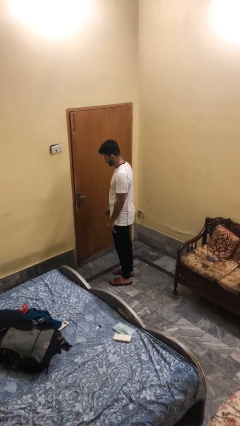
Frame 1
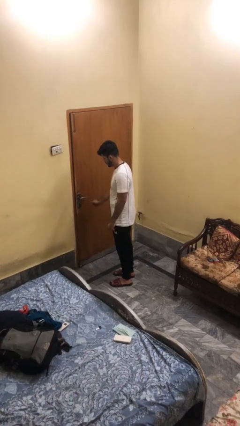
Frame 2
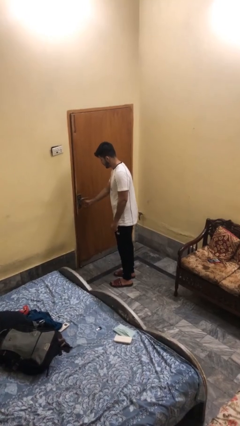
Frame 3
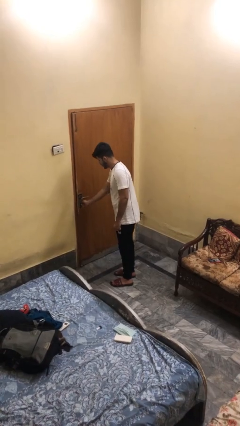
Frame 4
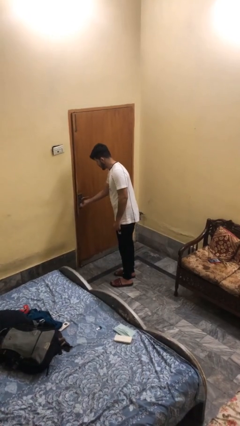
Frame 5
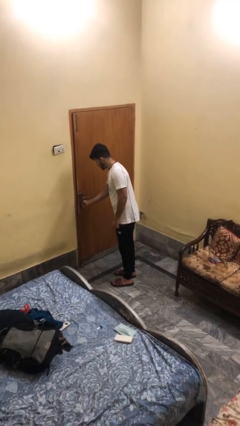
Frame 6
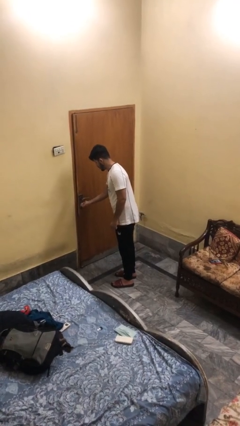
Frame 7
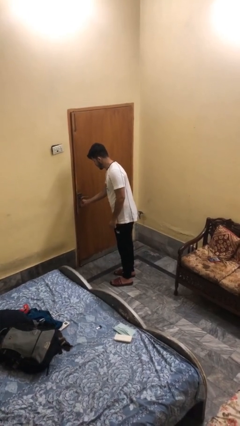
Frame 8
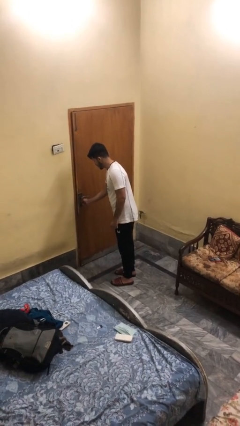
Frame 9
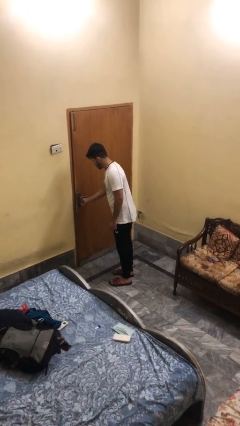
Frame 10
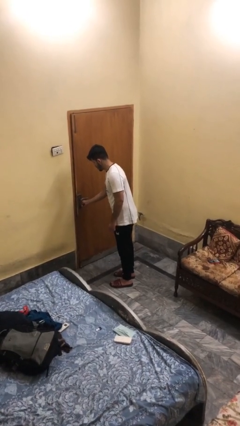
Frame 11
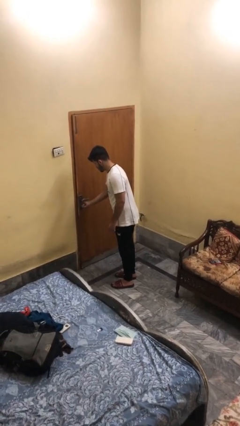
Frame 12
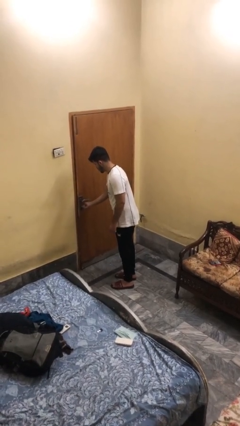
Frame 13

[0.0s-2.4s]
person unlocks door with keys

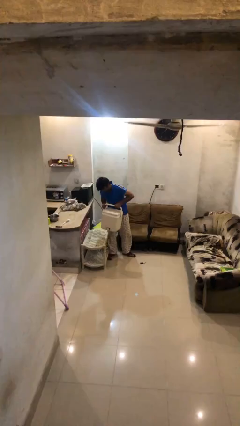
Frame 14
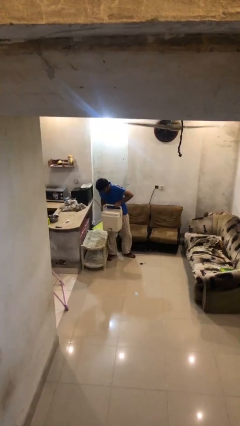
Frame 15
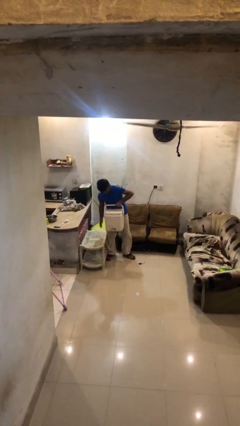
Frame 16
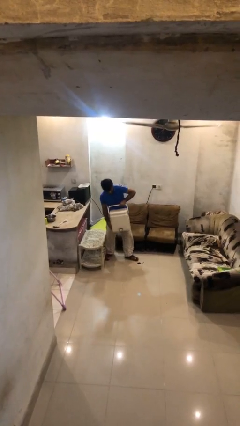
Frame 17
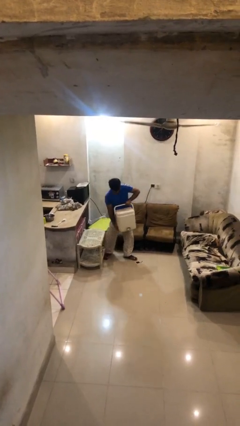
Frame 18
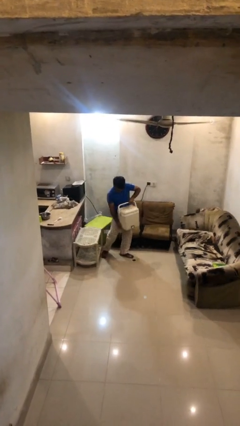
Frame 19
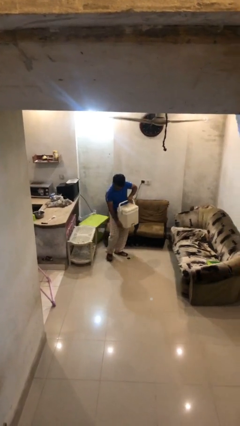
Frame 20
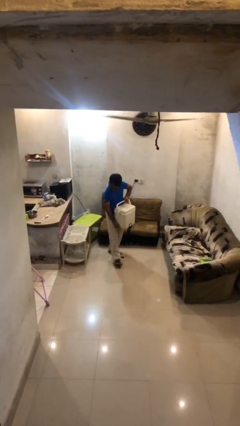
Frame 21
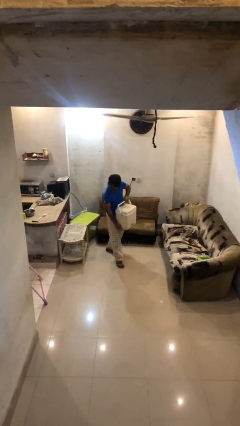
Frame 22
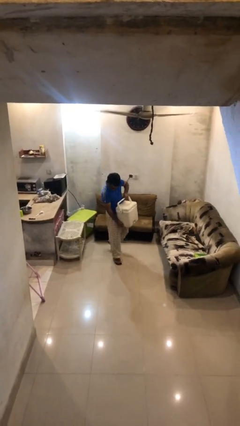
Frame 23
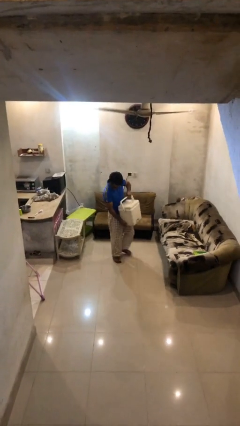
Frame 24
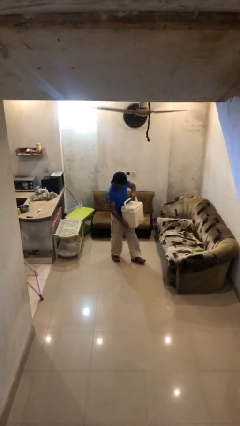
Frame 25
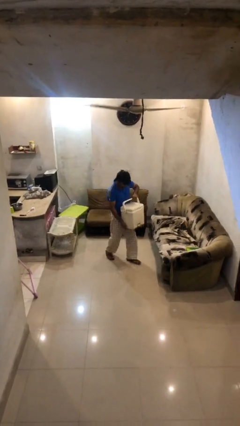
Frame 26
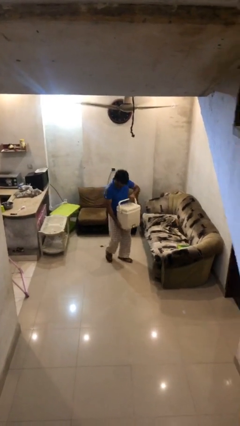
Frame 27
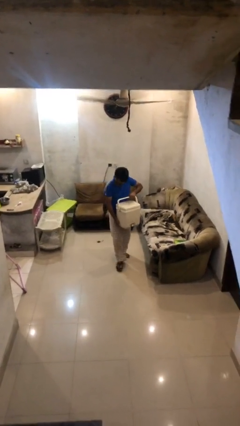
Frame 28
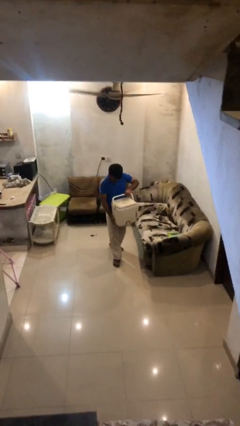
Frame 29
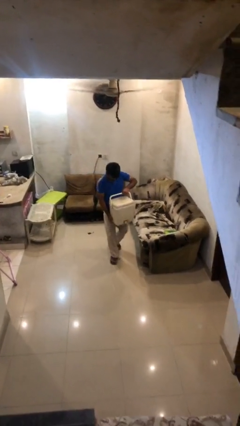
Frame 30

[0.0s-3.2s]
person carries heavy object

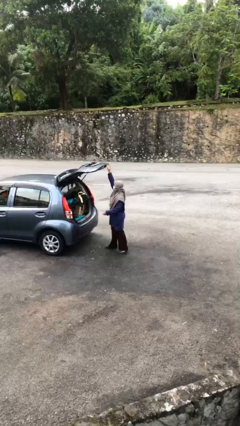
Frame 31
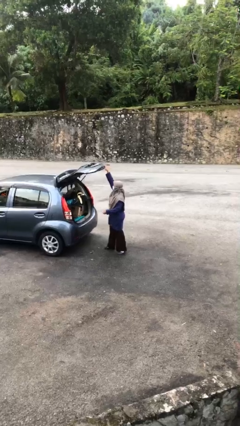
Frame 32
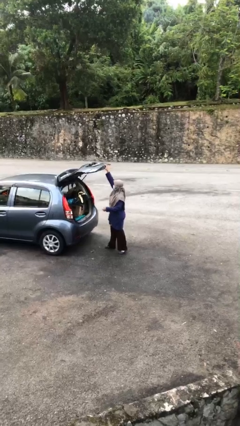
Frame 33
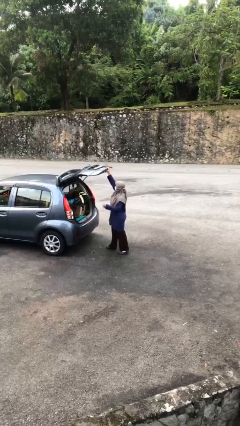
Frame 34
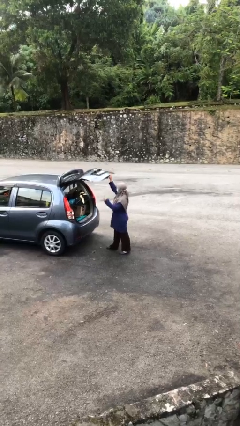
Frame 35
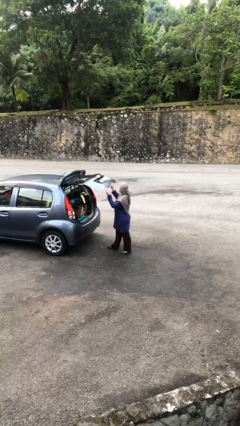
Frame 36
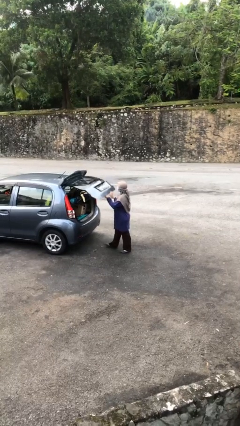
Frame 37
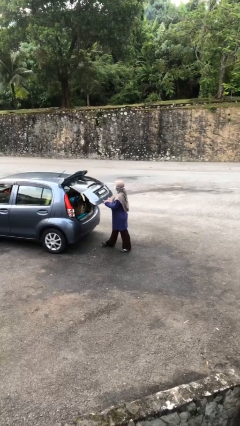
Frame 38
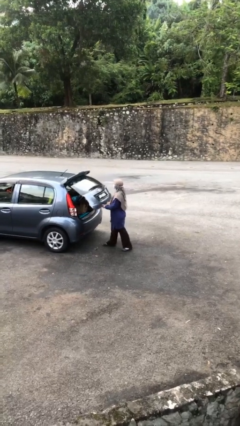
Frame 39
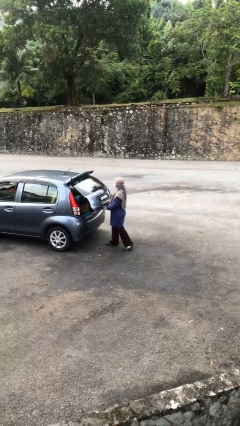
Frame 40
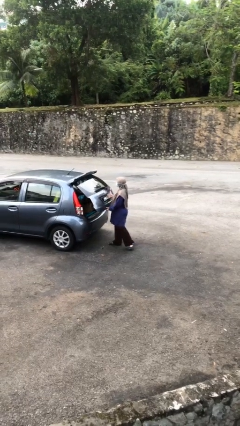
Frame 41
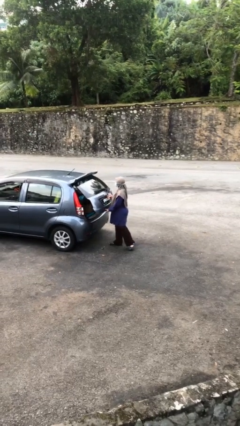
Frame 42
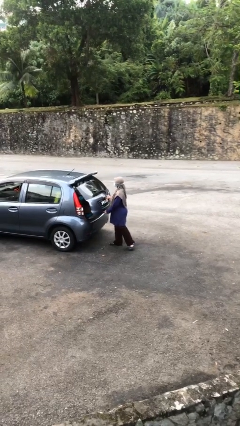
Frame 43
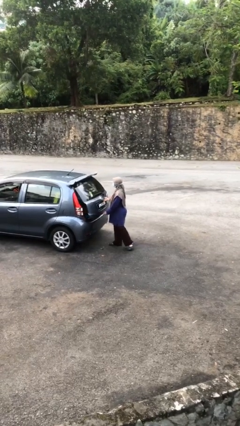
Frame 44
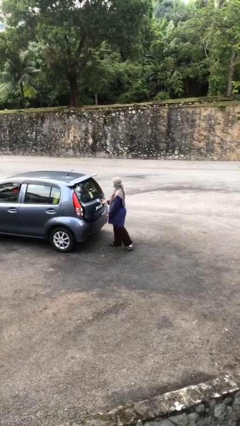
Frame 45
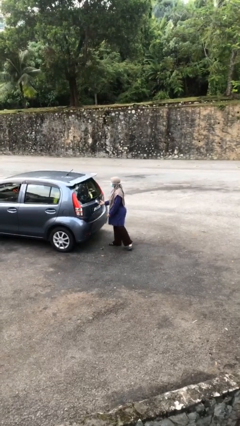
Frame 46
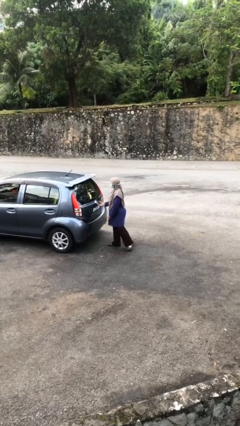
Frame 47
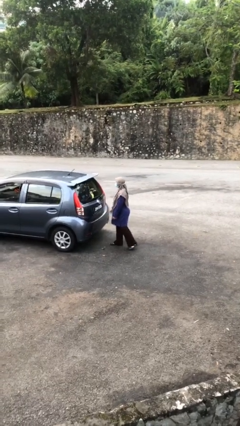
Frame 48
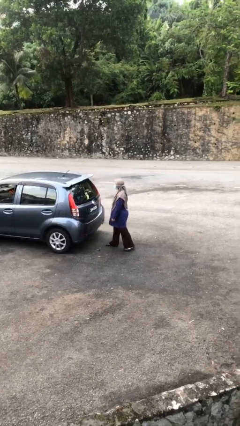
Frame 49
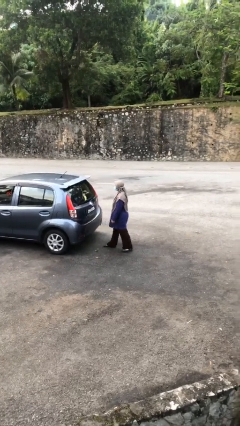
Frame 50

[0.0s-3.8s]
person closes car trunk

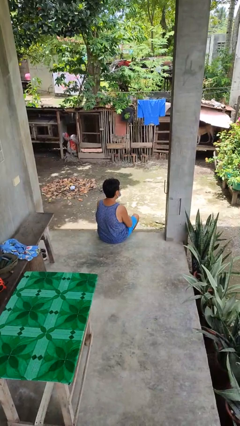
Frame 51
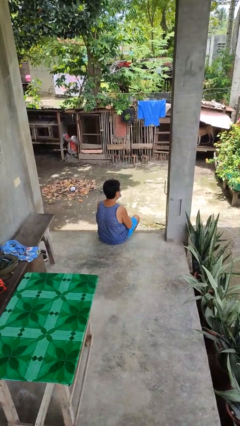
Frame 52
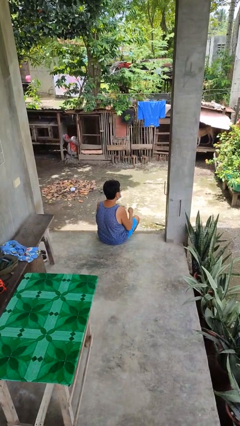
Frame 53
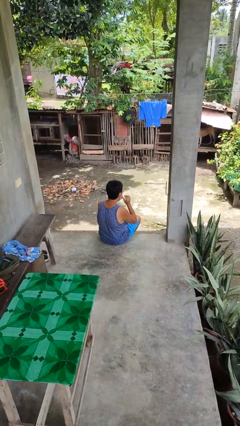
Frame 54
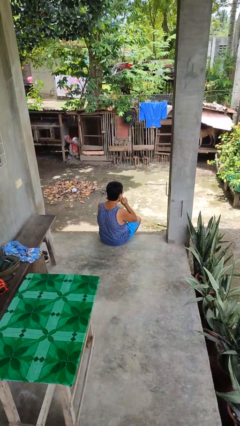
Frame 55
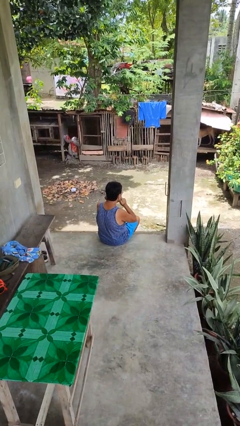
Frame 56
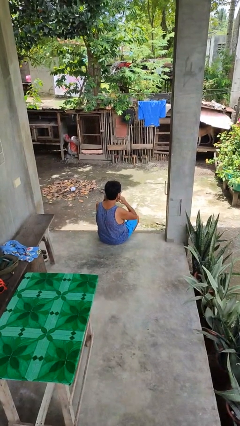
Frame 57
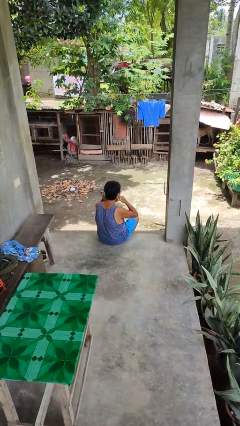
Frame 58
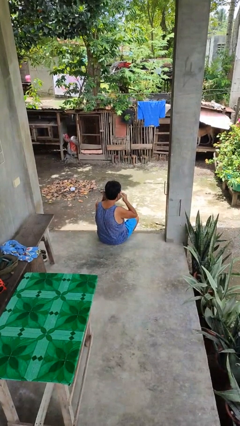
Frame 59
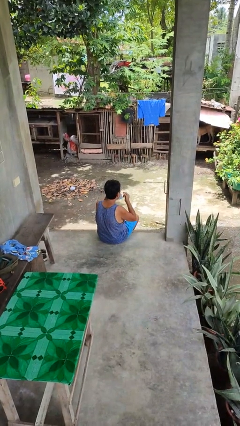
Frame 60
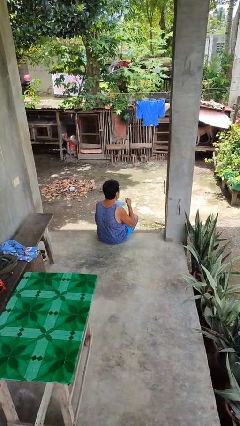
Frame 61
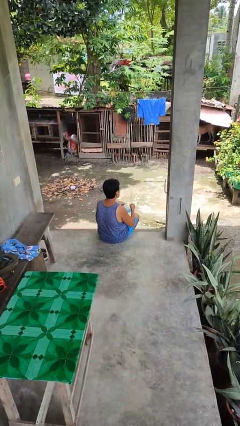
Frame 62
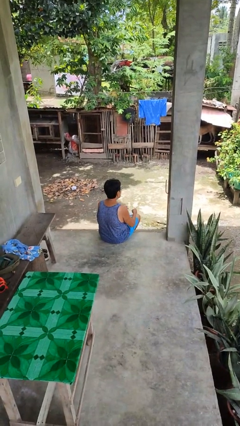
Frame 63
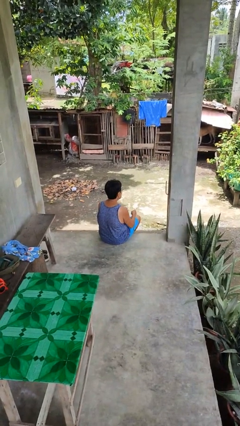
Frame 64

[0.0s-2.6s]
person takes off facemask

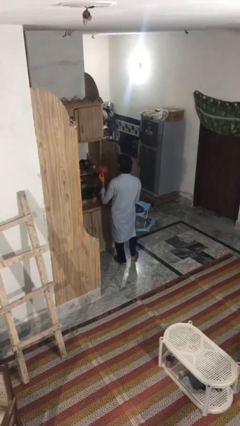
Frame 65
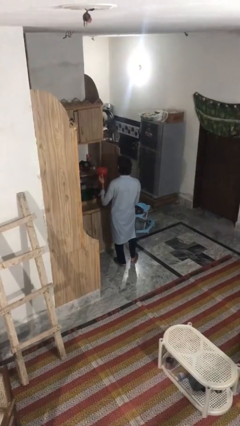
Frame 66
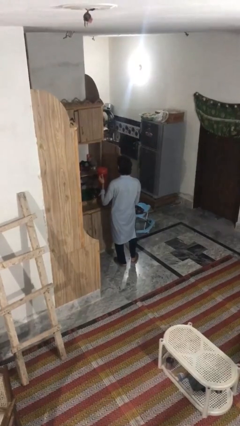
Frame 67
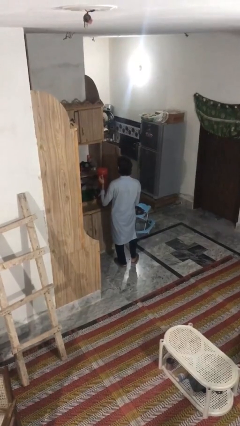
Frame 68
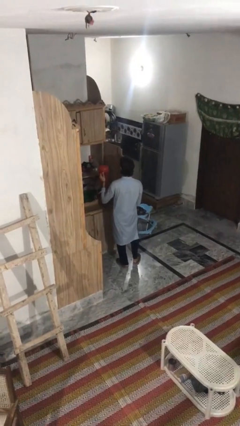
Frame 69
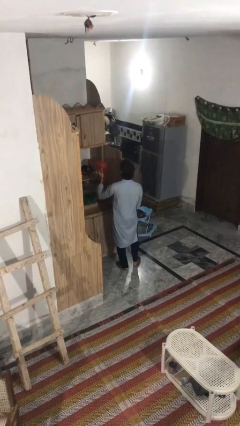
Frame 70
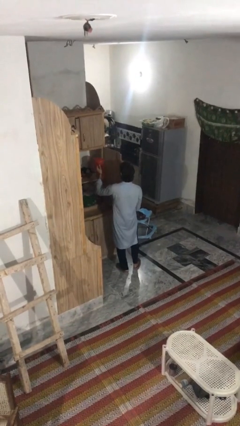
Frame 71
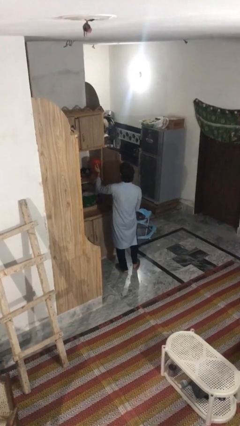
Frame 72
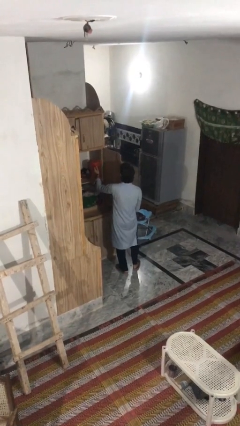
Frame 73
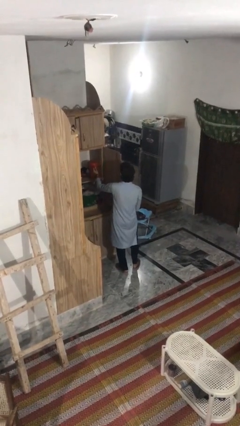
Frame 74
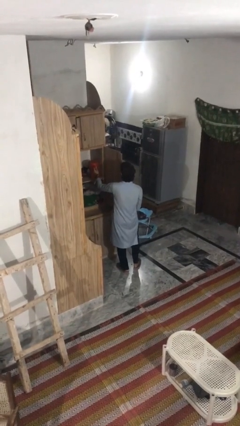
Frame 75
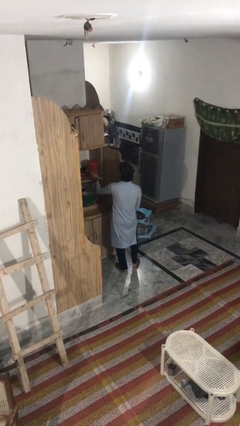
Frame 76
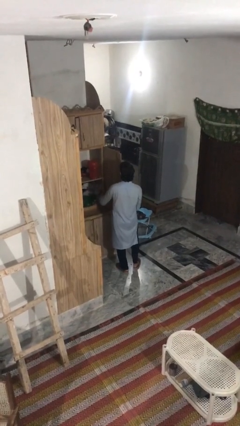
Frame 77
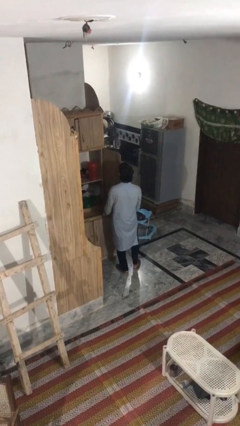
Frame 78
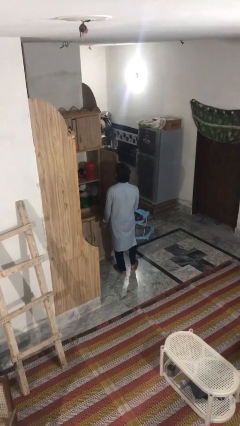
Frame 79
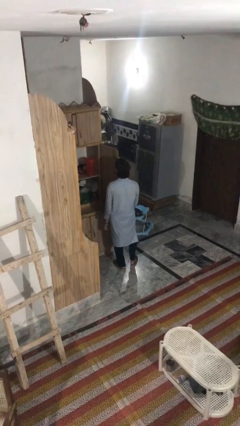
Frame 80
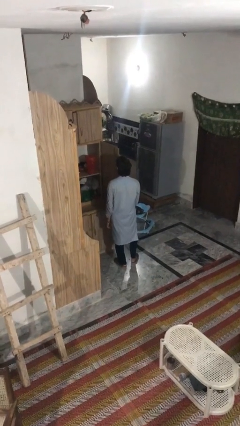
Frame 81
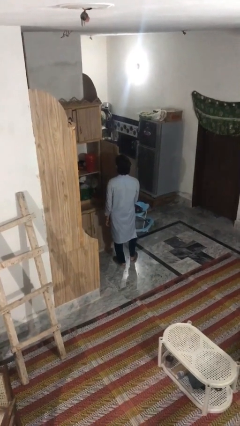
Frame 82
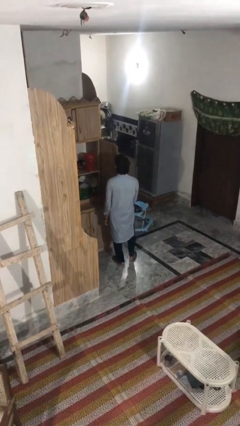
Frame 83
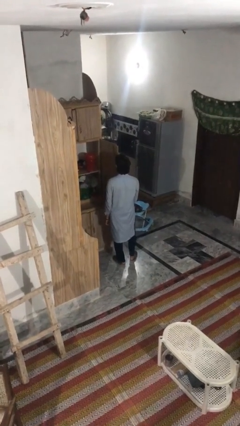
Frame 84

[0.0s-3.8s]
person puts down object into cabinet

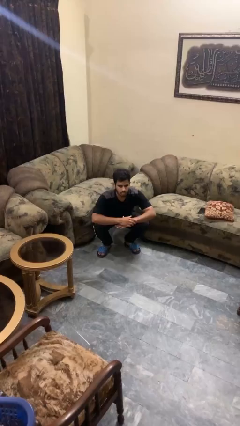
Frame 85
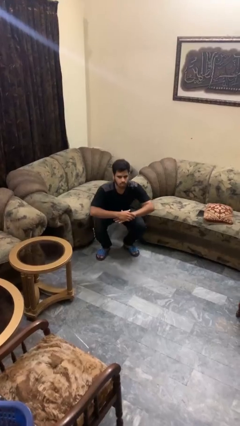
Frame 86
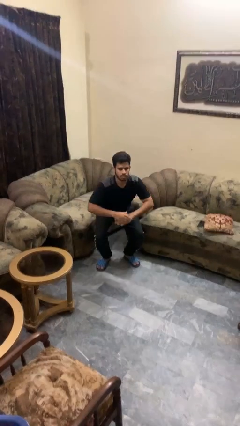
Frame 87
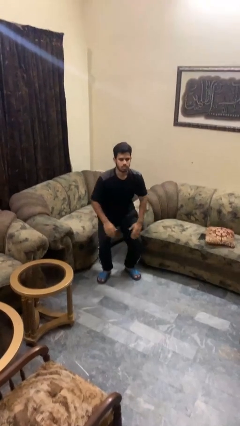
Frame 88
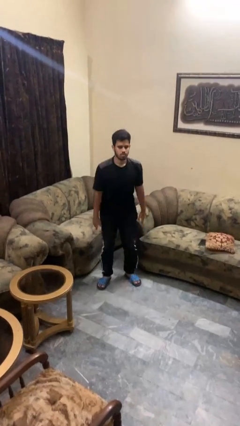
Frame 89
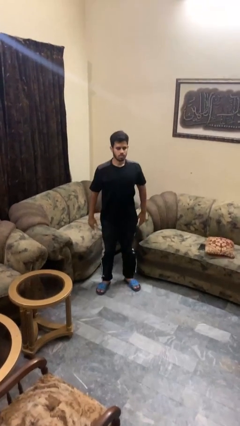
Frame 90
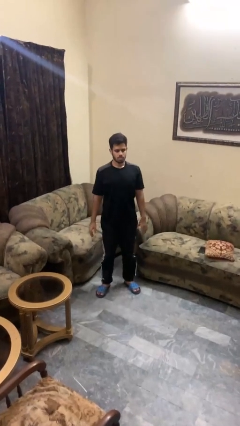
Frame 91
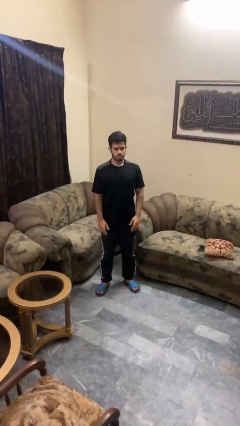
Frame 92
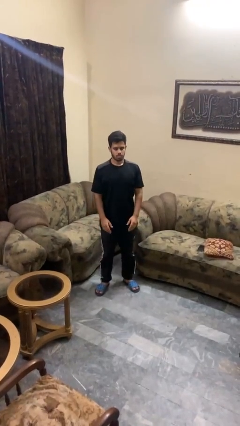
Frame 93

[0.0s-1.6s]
person stands up
